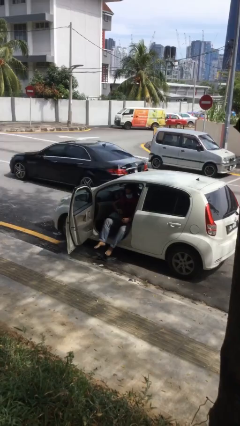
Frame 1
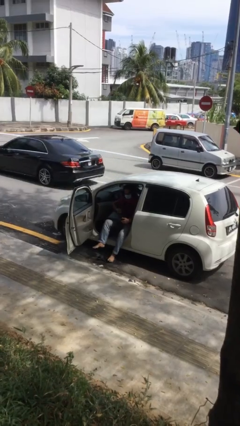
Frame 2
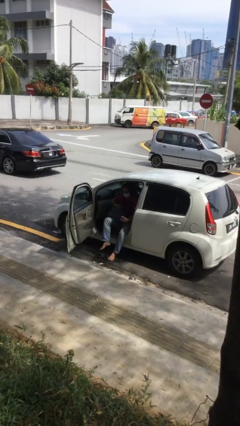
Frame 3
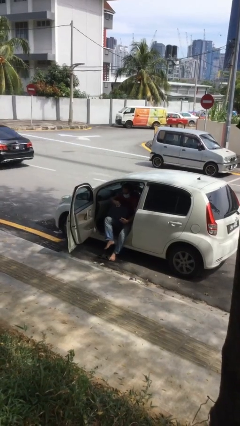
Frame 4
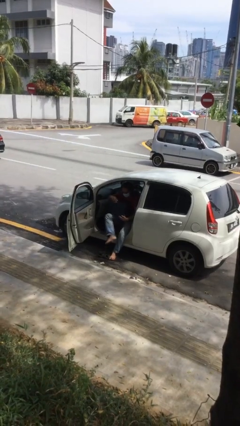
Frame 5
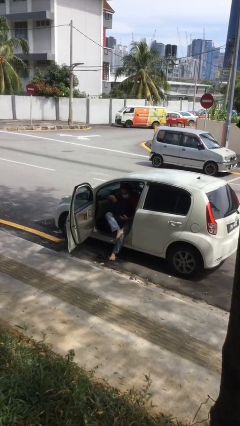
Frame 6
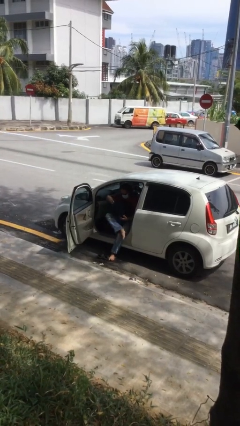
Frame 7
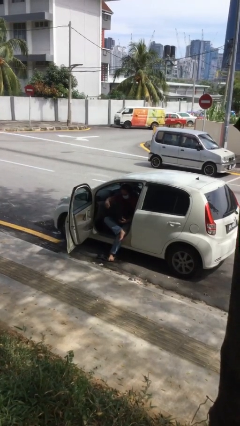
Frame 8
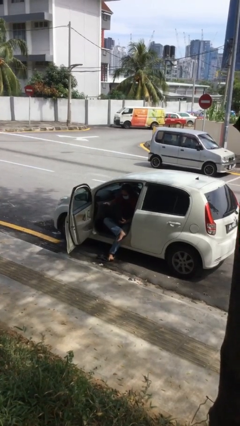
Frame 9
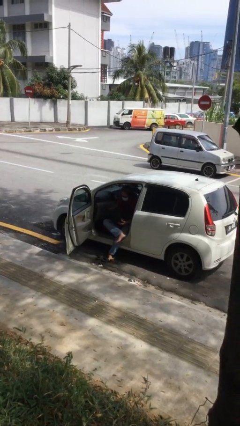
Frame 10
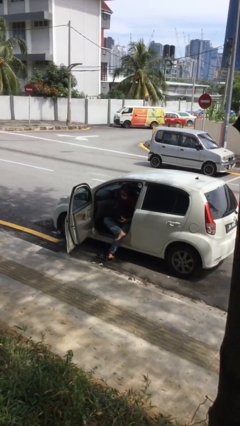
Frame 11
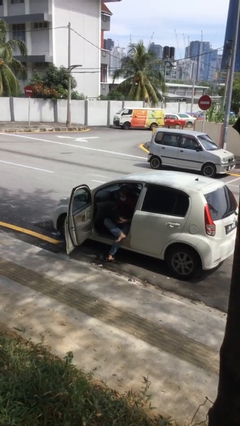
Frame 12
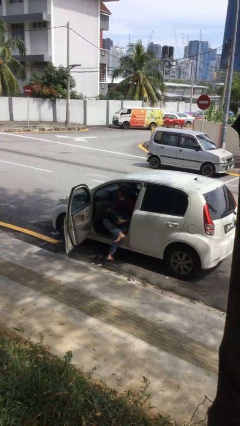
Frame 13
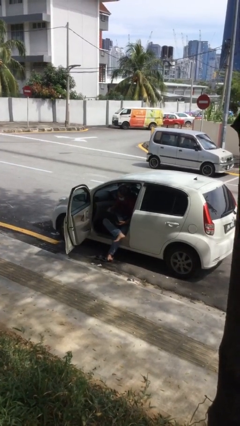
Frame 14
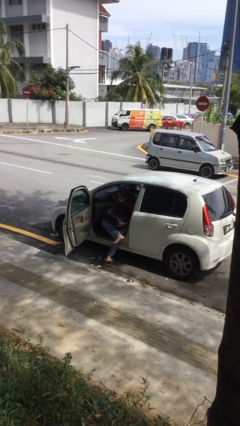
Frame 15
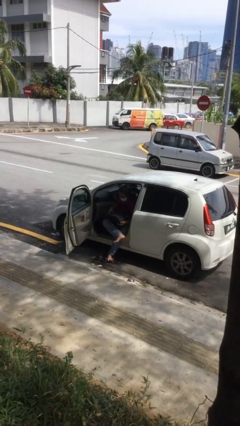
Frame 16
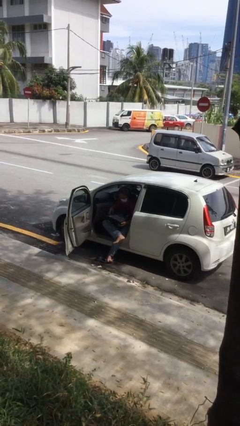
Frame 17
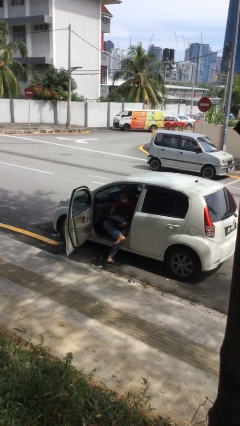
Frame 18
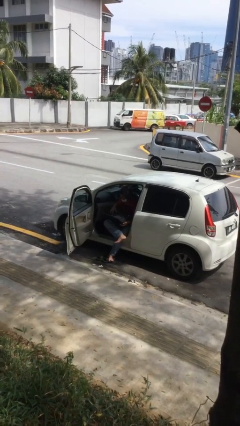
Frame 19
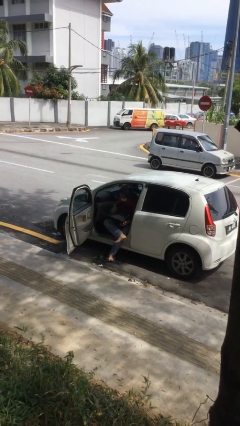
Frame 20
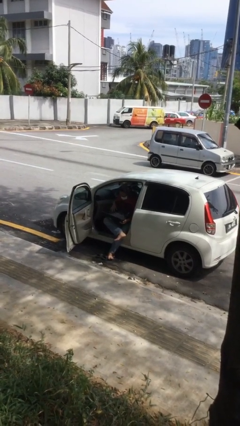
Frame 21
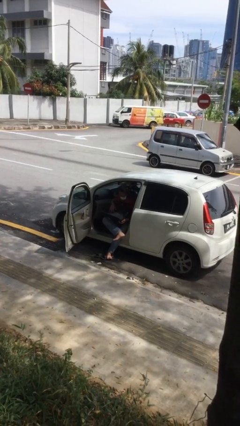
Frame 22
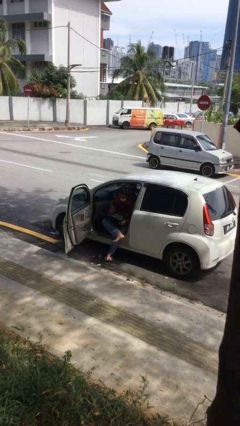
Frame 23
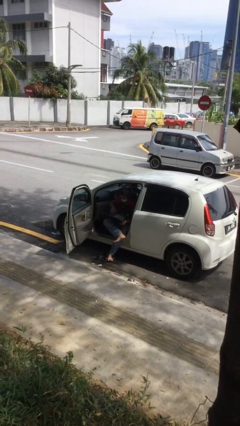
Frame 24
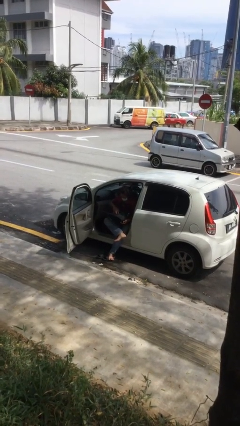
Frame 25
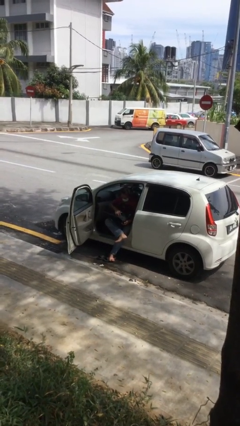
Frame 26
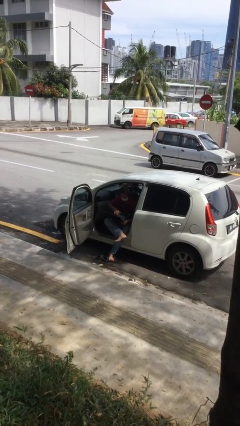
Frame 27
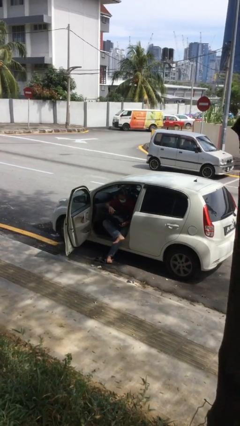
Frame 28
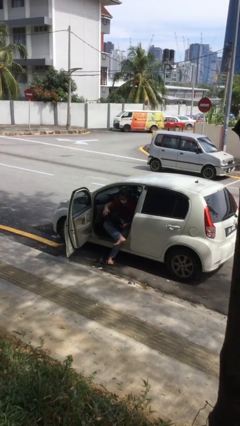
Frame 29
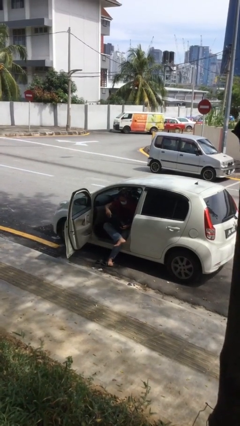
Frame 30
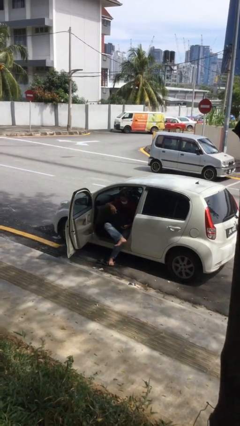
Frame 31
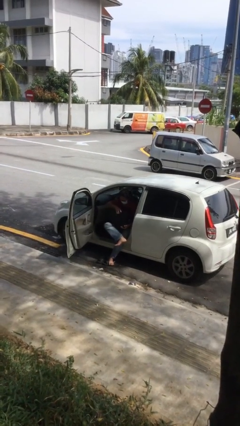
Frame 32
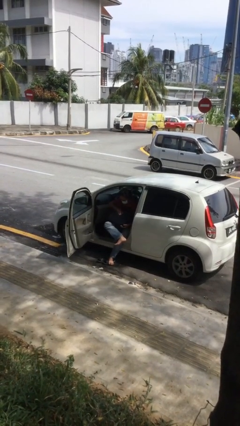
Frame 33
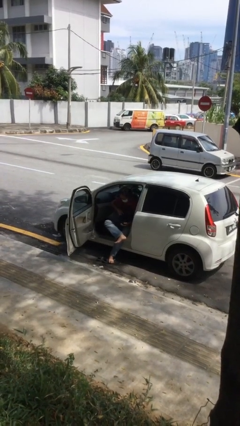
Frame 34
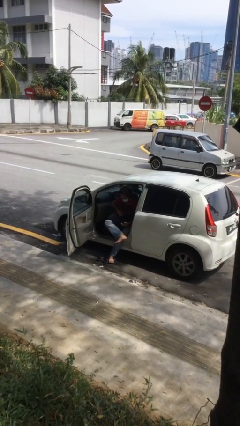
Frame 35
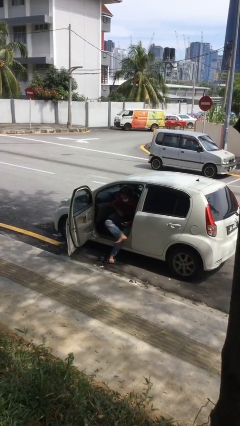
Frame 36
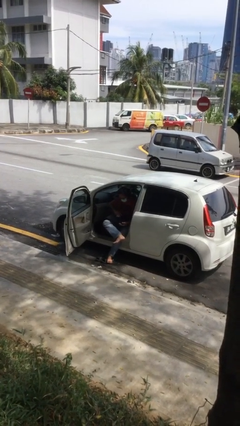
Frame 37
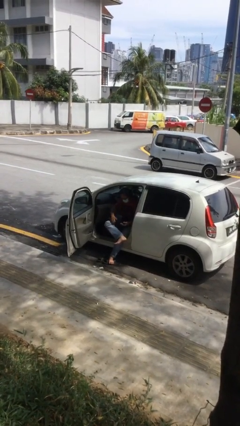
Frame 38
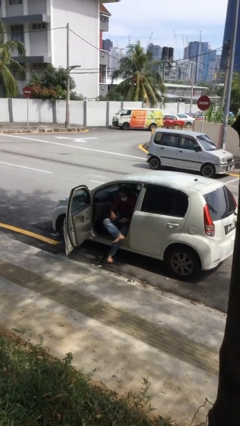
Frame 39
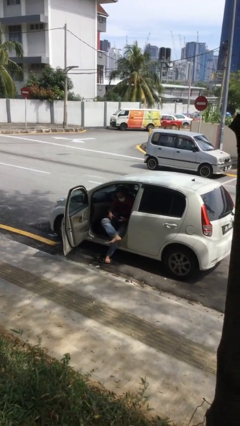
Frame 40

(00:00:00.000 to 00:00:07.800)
person interacts with laptop

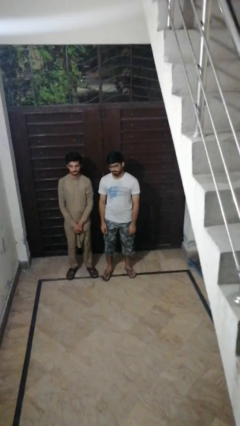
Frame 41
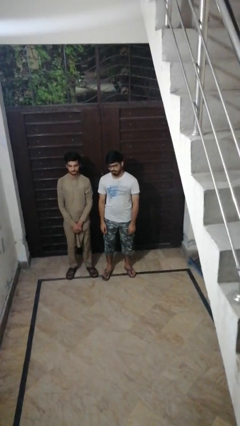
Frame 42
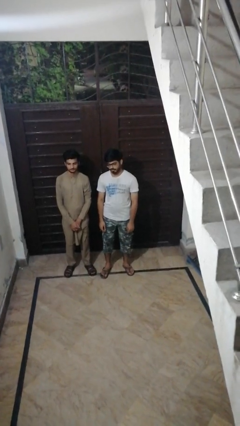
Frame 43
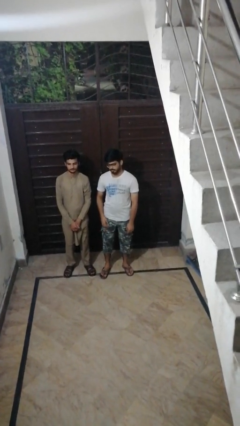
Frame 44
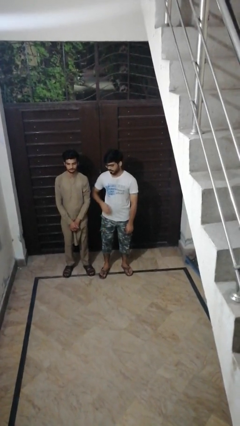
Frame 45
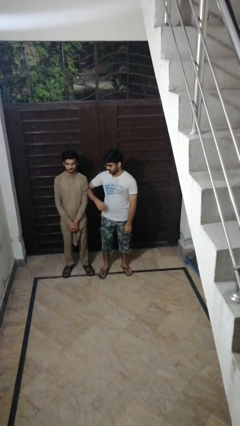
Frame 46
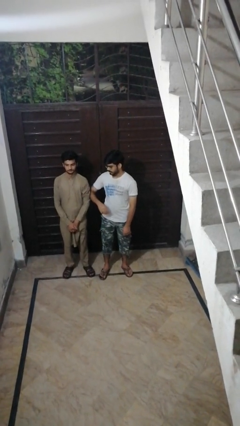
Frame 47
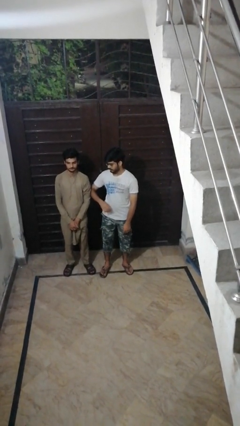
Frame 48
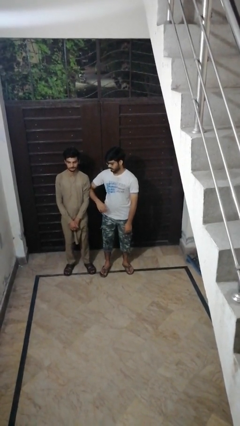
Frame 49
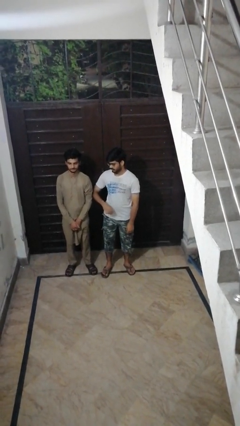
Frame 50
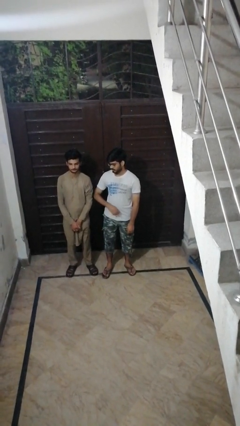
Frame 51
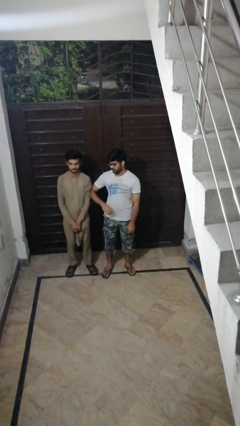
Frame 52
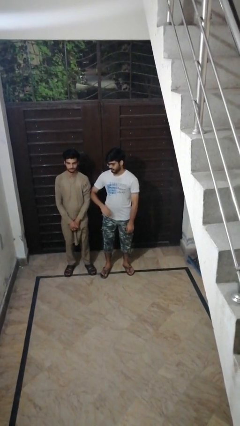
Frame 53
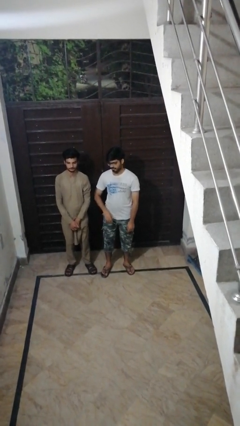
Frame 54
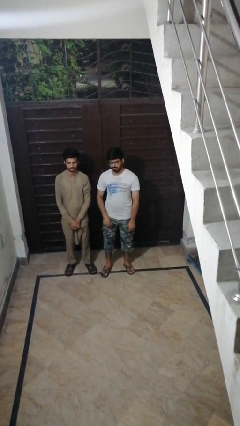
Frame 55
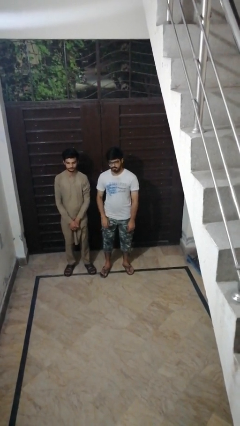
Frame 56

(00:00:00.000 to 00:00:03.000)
person nudges person with elbow

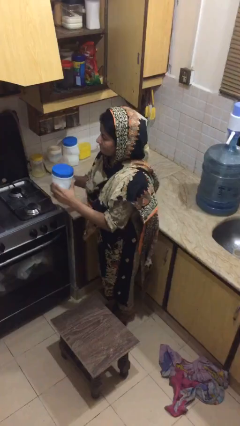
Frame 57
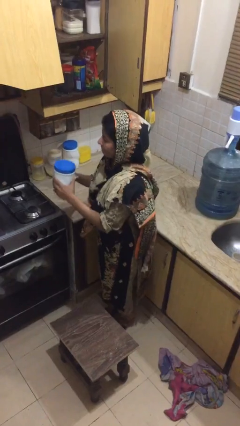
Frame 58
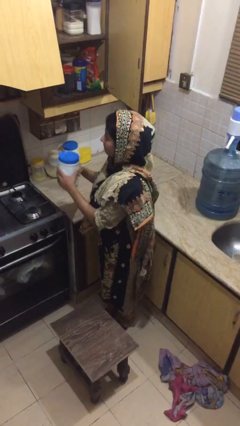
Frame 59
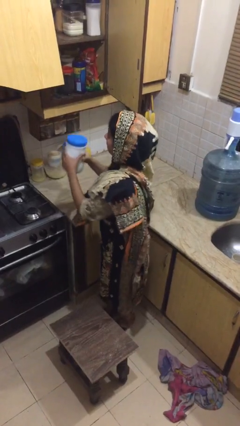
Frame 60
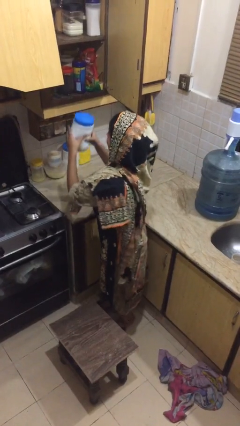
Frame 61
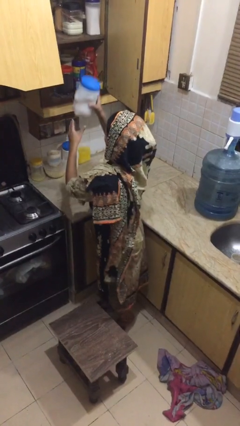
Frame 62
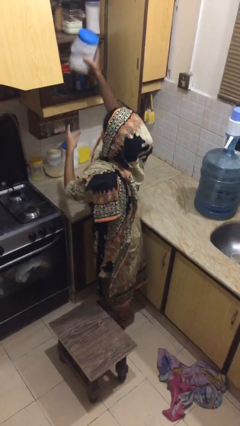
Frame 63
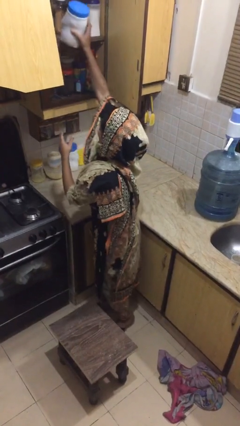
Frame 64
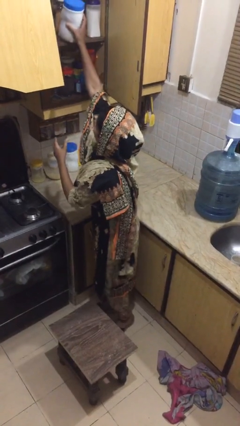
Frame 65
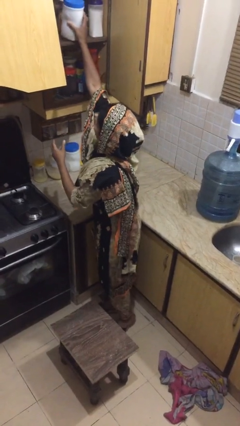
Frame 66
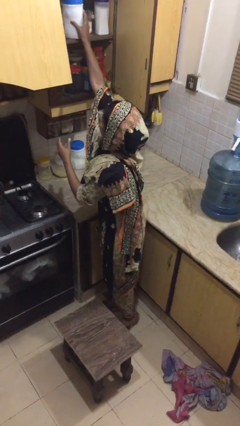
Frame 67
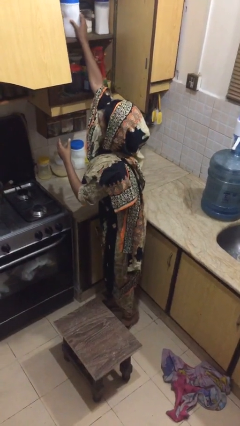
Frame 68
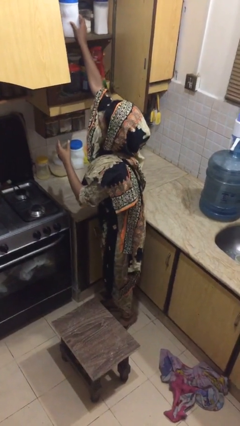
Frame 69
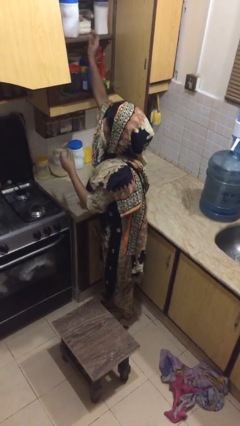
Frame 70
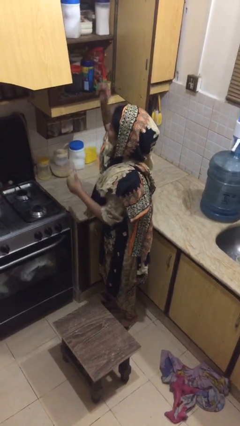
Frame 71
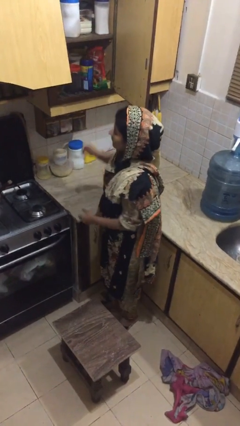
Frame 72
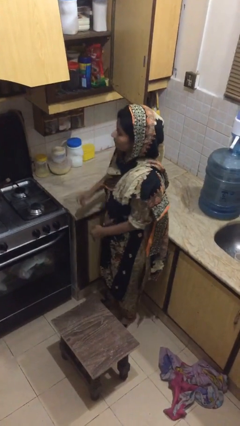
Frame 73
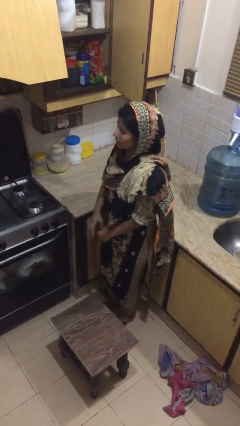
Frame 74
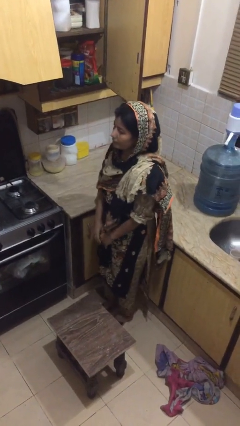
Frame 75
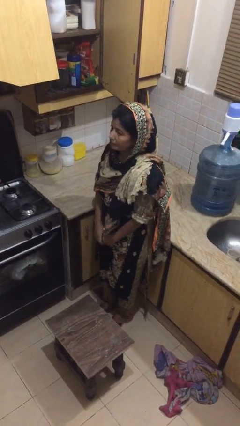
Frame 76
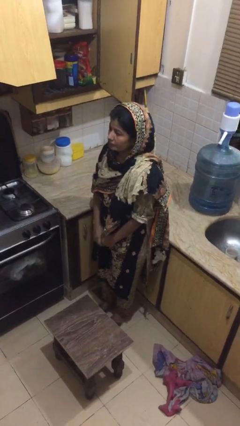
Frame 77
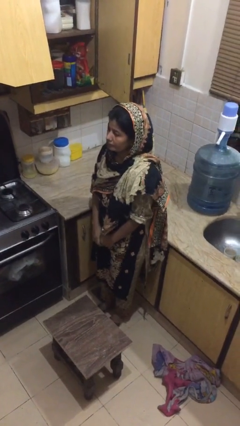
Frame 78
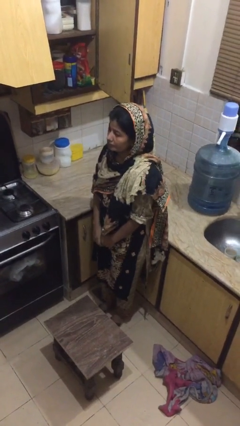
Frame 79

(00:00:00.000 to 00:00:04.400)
person puts down object on shelf

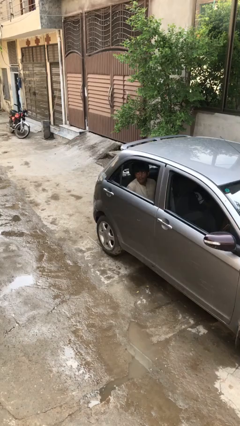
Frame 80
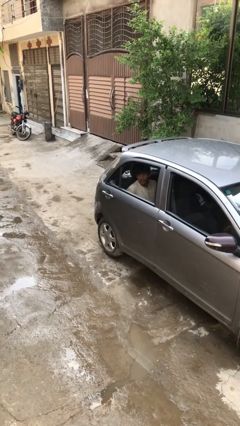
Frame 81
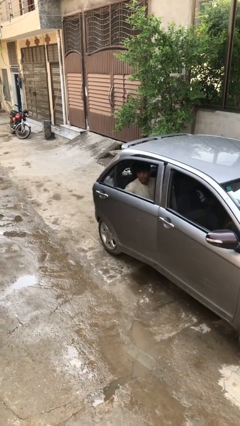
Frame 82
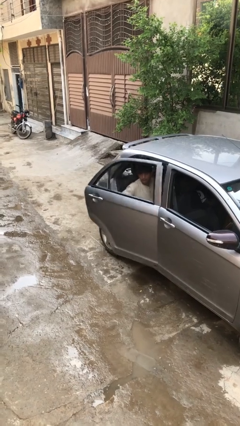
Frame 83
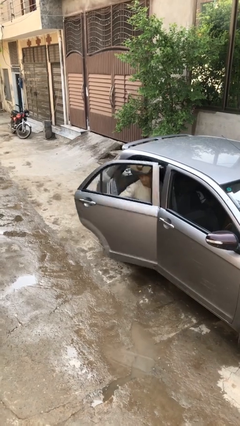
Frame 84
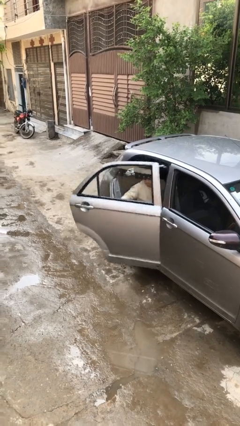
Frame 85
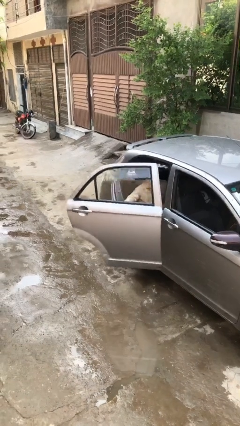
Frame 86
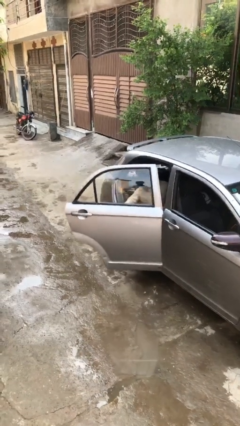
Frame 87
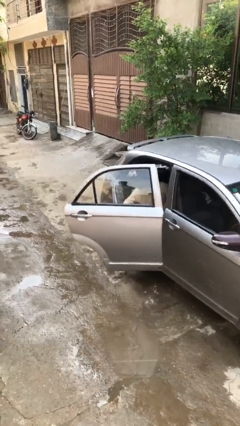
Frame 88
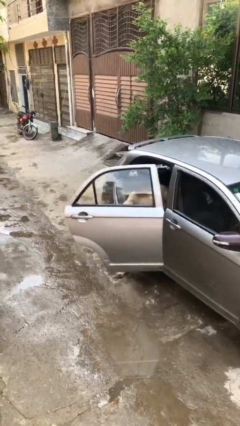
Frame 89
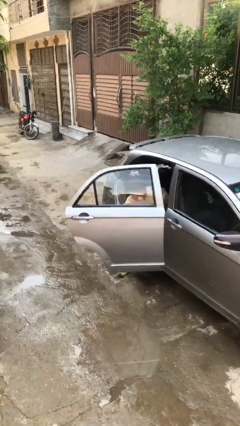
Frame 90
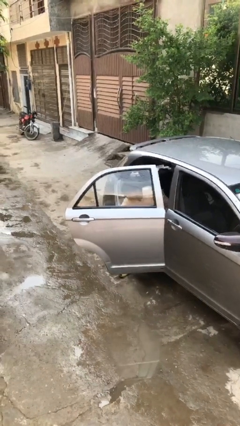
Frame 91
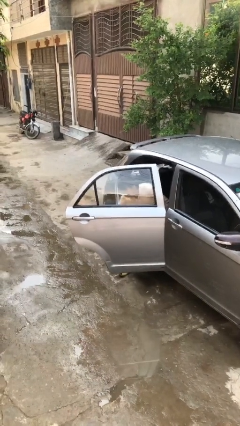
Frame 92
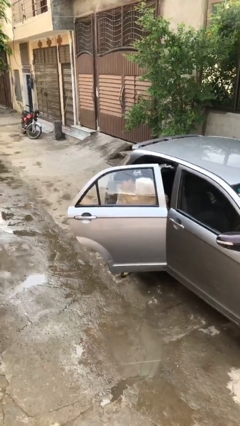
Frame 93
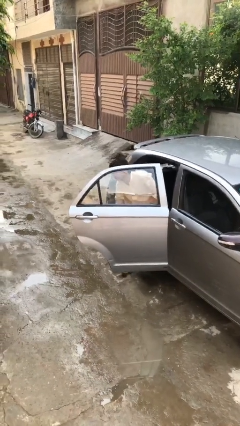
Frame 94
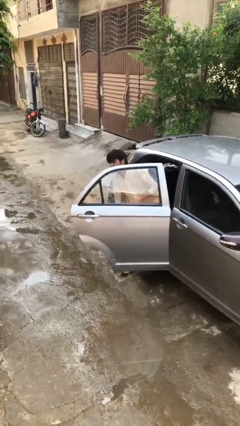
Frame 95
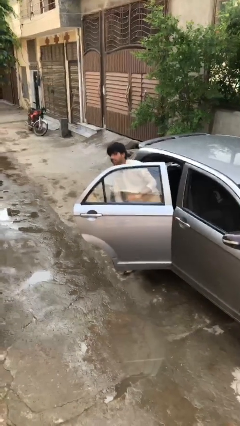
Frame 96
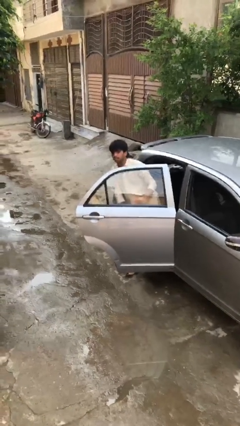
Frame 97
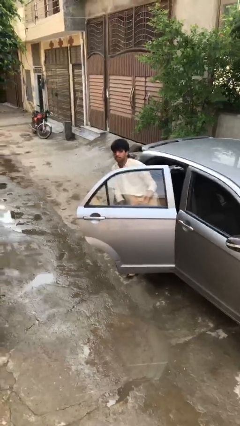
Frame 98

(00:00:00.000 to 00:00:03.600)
person opens car door
